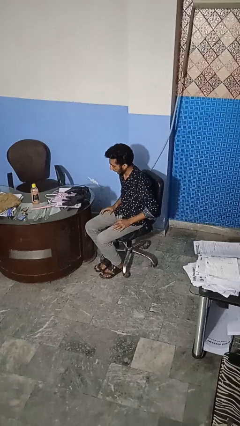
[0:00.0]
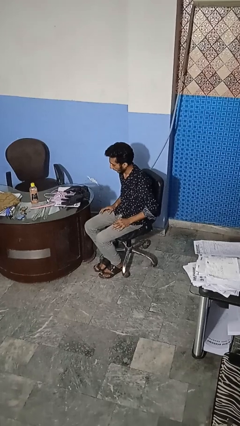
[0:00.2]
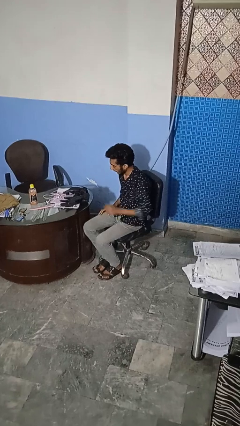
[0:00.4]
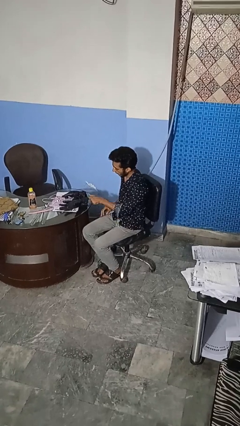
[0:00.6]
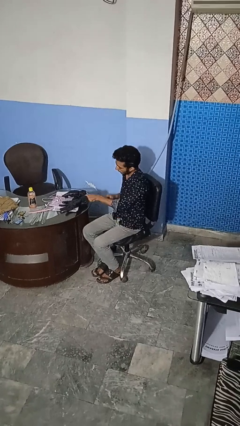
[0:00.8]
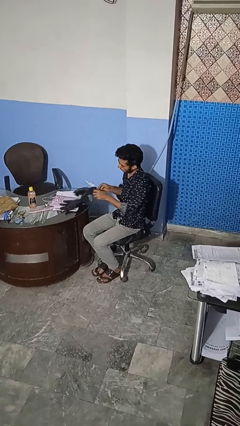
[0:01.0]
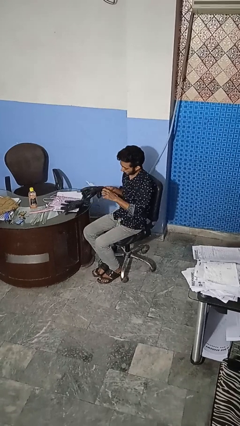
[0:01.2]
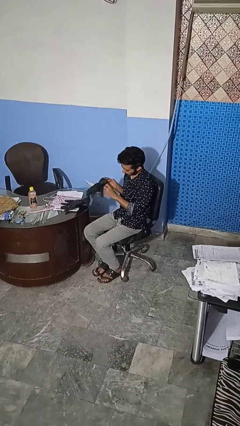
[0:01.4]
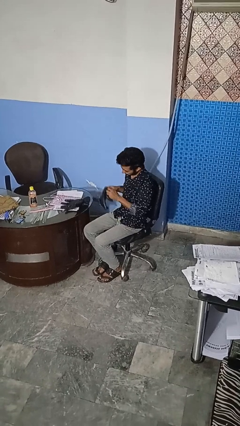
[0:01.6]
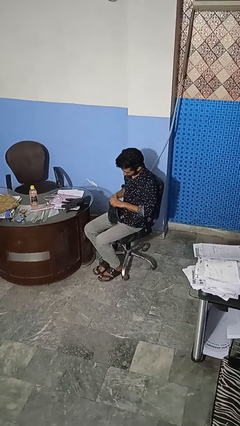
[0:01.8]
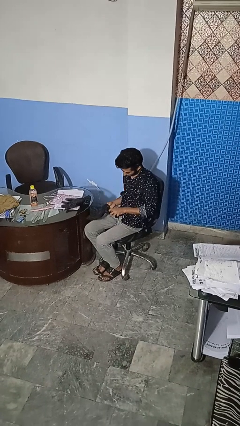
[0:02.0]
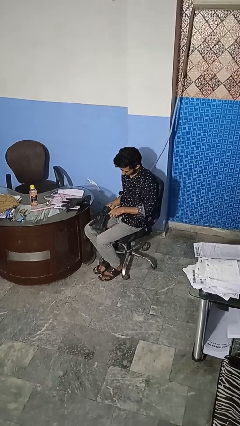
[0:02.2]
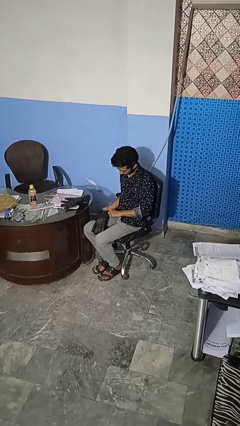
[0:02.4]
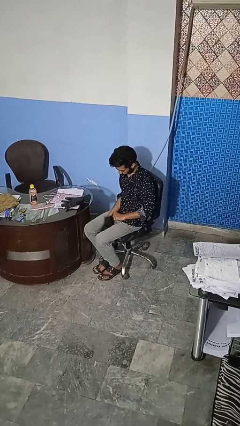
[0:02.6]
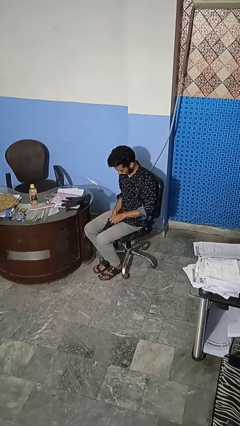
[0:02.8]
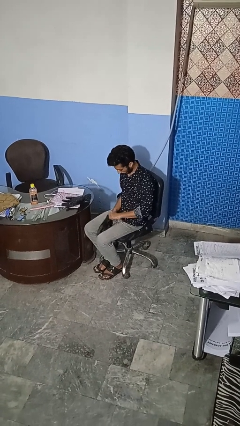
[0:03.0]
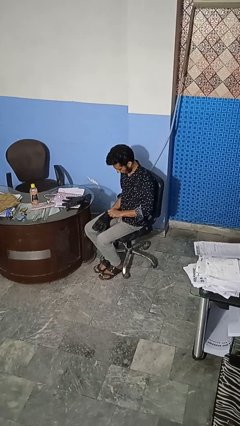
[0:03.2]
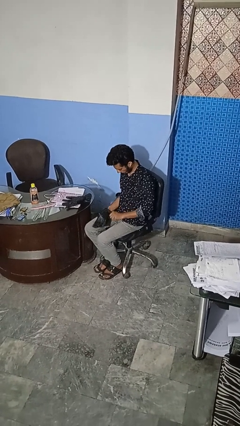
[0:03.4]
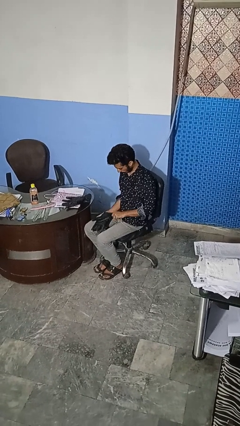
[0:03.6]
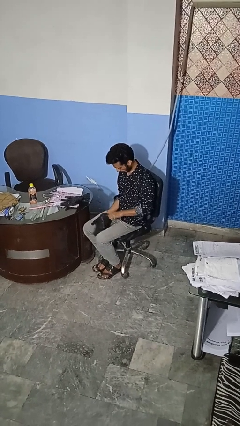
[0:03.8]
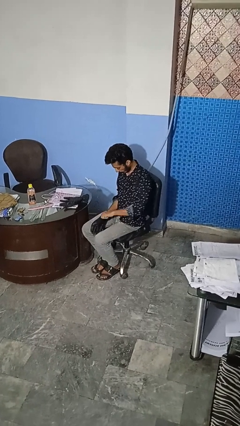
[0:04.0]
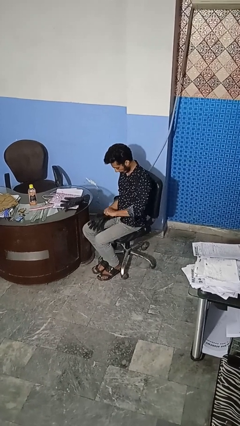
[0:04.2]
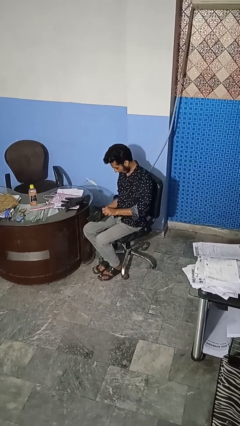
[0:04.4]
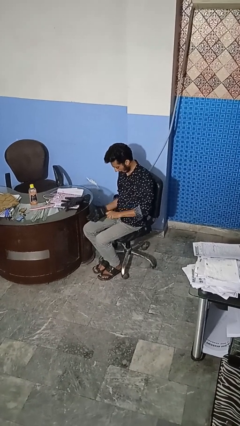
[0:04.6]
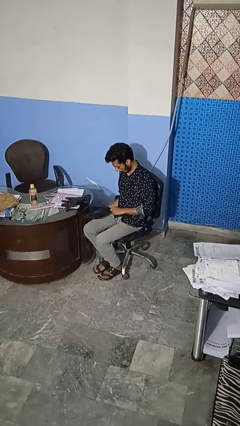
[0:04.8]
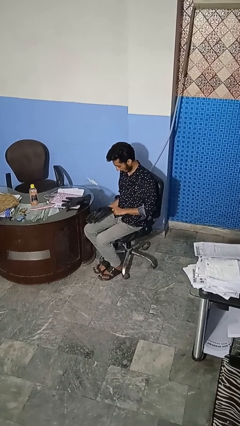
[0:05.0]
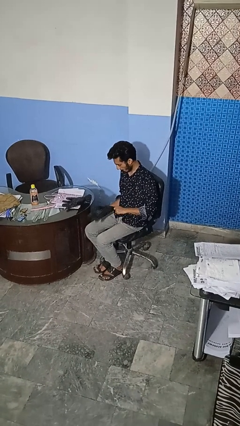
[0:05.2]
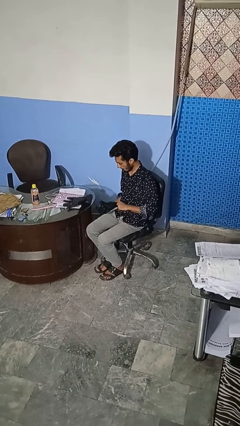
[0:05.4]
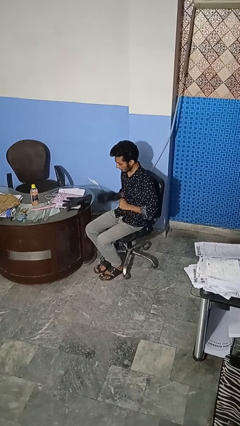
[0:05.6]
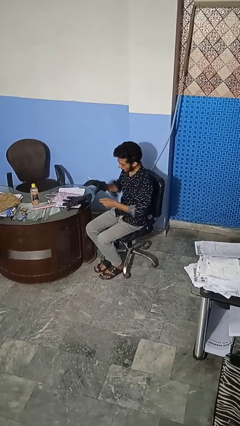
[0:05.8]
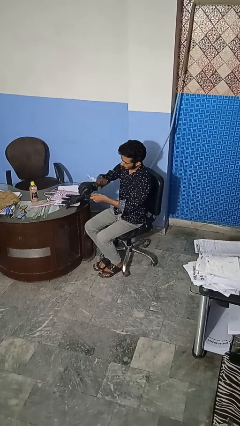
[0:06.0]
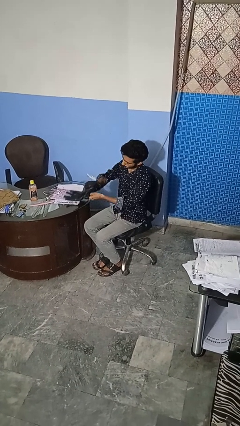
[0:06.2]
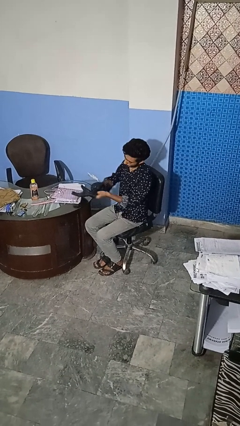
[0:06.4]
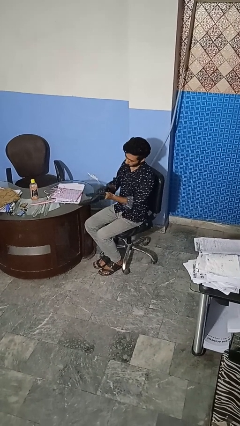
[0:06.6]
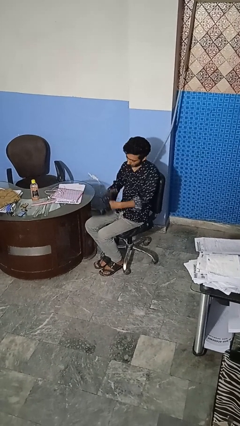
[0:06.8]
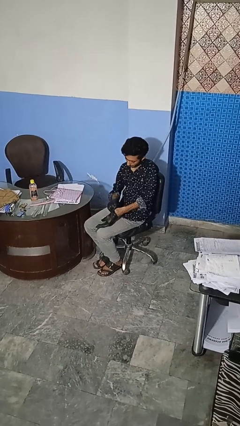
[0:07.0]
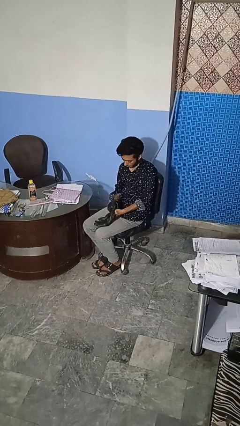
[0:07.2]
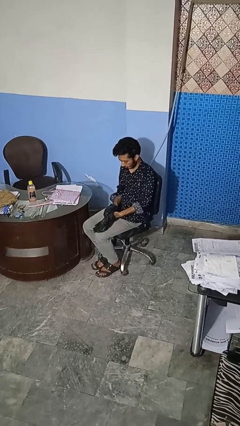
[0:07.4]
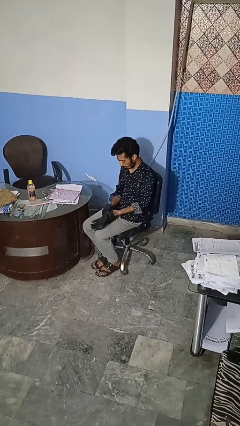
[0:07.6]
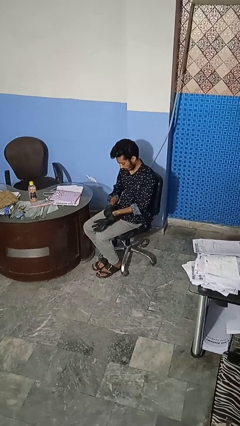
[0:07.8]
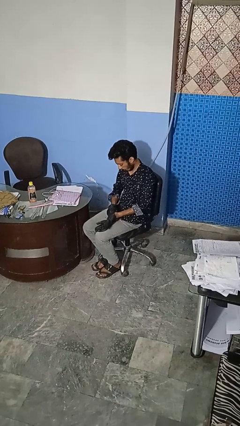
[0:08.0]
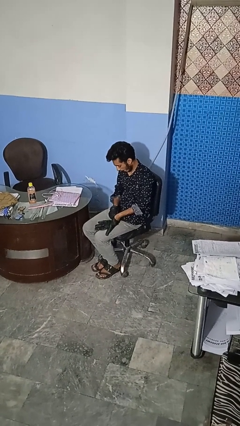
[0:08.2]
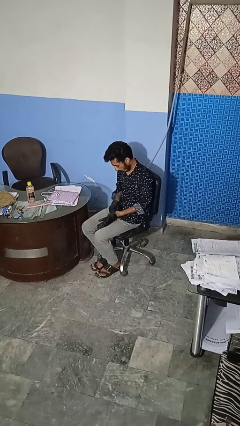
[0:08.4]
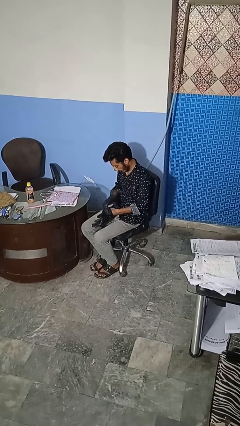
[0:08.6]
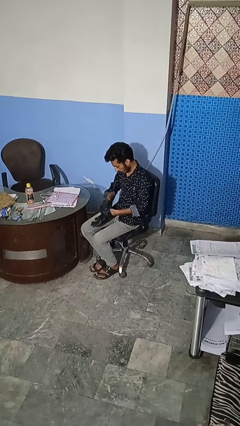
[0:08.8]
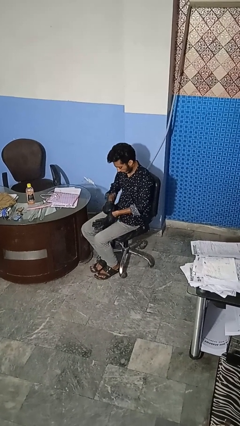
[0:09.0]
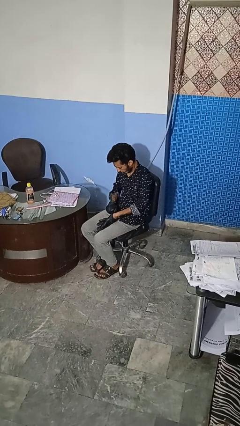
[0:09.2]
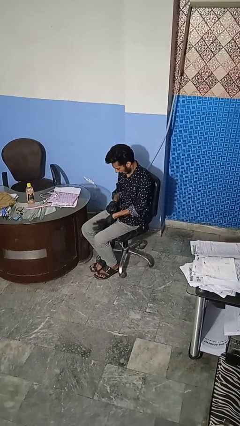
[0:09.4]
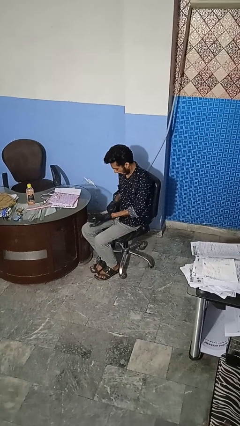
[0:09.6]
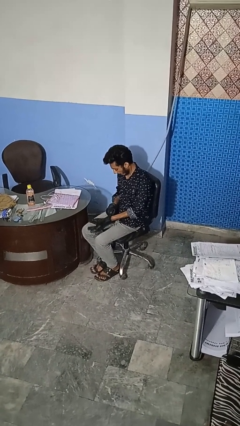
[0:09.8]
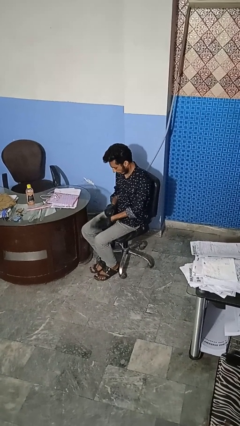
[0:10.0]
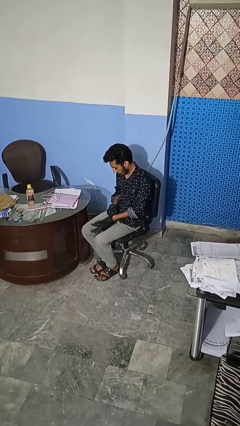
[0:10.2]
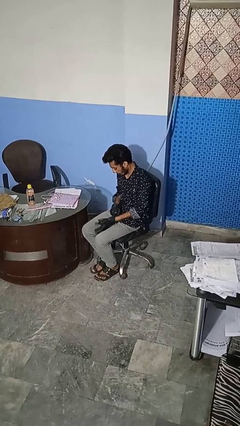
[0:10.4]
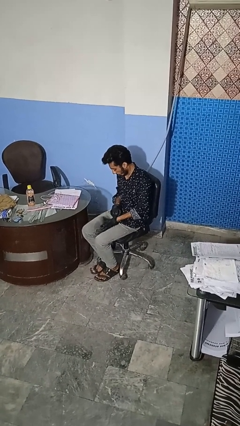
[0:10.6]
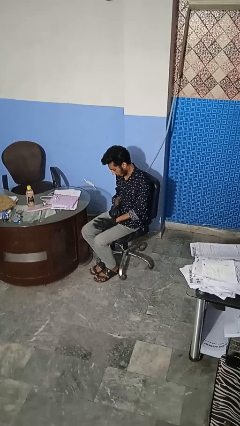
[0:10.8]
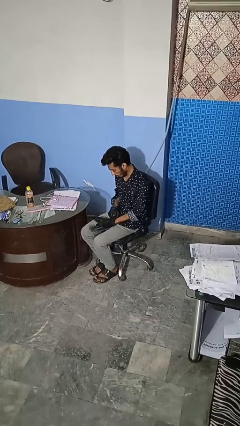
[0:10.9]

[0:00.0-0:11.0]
person puts on gloves

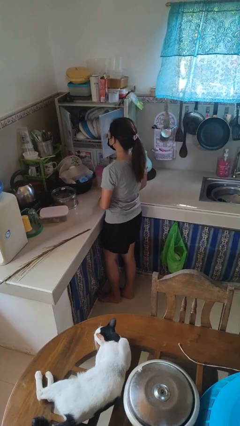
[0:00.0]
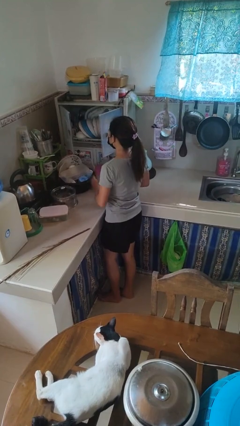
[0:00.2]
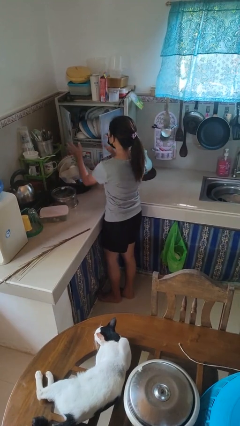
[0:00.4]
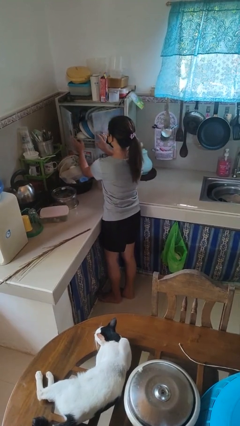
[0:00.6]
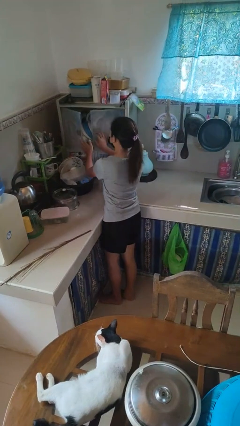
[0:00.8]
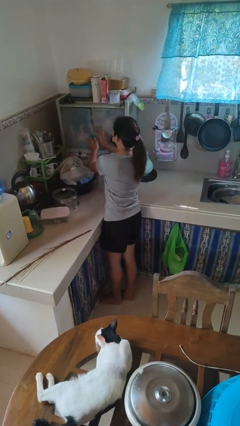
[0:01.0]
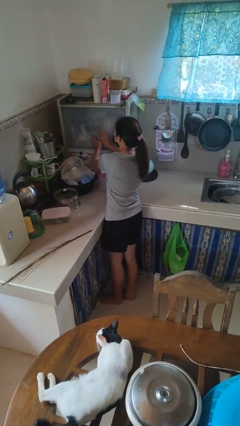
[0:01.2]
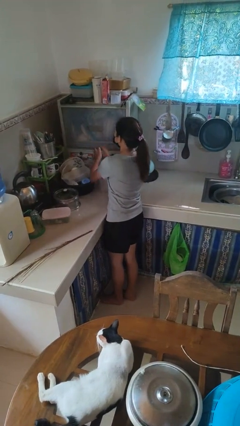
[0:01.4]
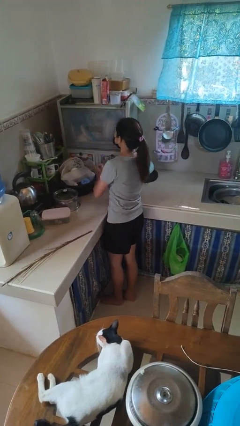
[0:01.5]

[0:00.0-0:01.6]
person closes kitchen drawer

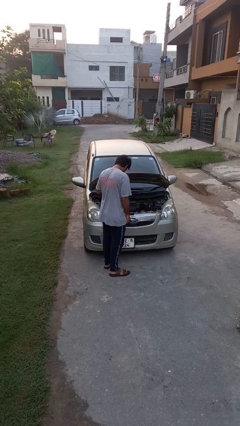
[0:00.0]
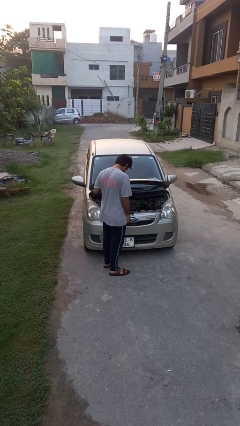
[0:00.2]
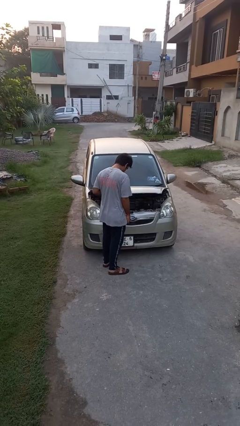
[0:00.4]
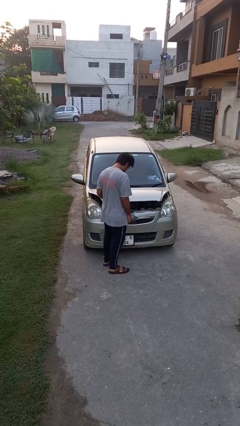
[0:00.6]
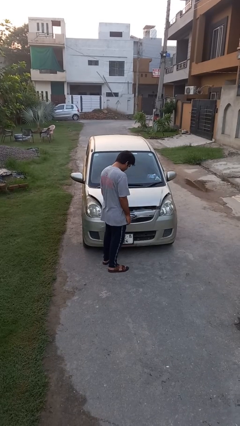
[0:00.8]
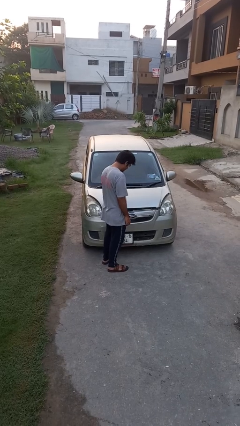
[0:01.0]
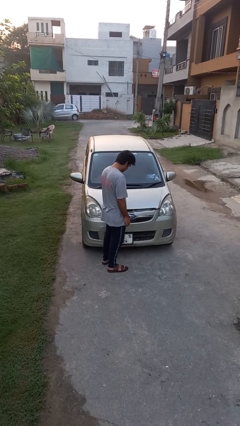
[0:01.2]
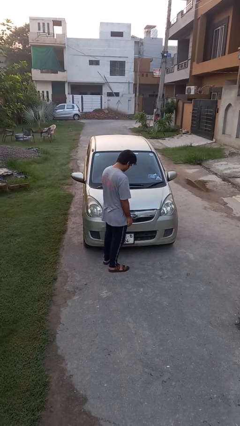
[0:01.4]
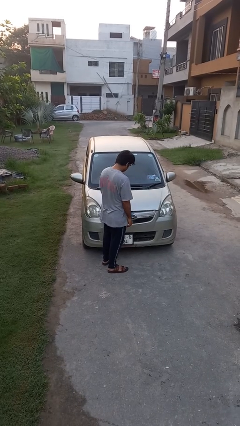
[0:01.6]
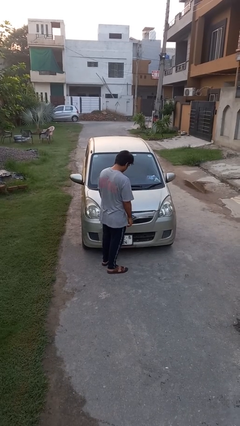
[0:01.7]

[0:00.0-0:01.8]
person closes car hood

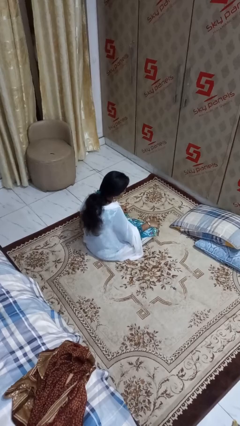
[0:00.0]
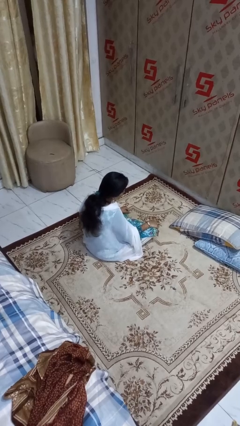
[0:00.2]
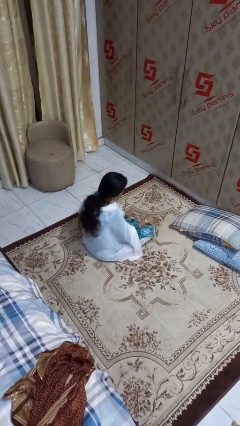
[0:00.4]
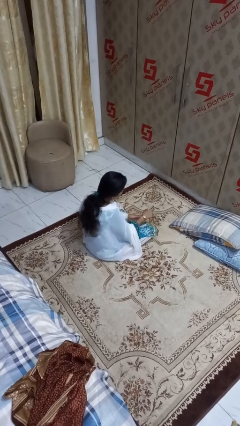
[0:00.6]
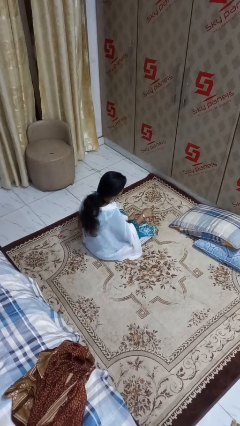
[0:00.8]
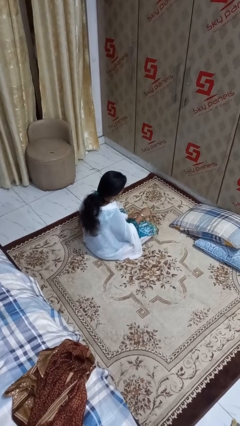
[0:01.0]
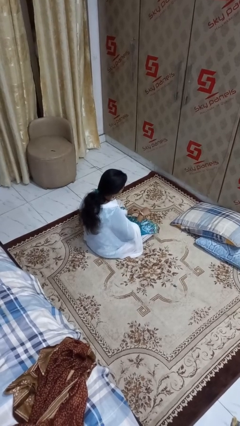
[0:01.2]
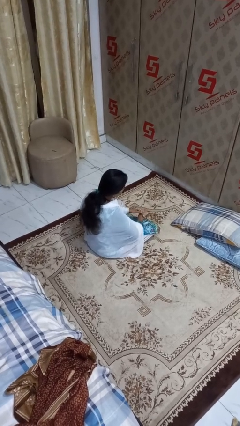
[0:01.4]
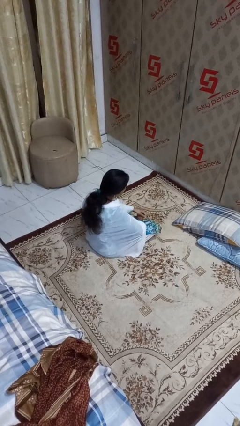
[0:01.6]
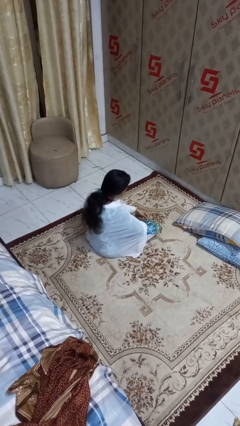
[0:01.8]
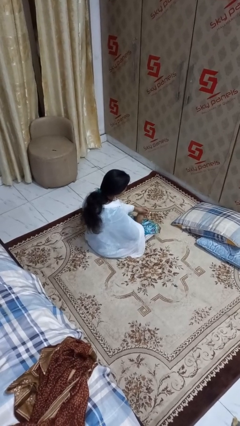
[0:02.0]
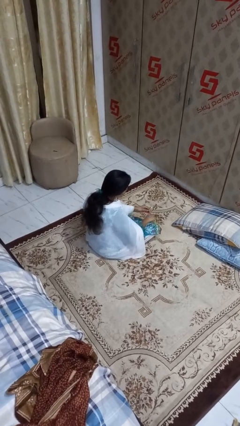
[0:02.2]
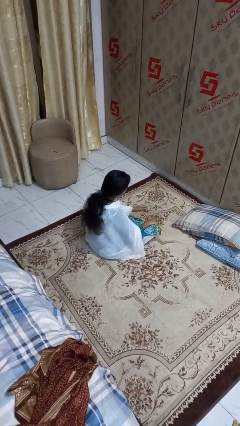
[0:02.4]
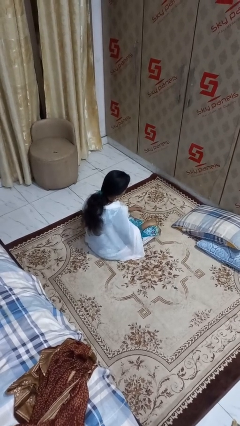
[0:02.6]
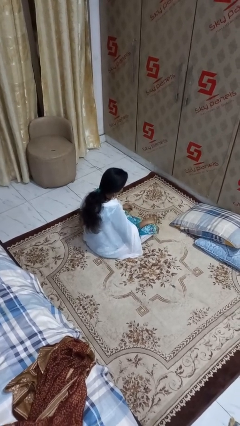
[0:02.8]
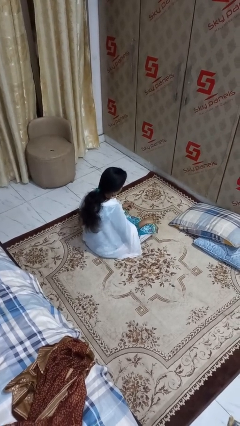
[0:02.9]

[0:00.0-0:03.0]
person takes off wristwatch

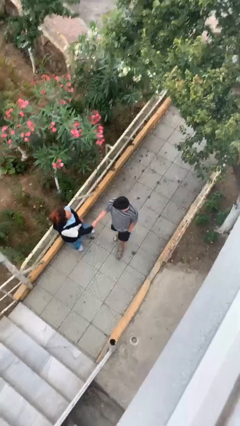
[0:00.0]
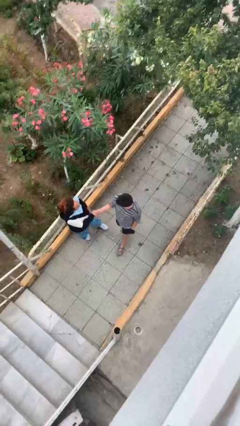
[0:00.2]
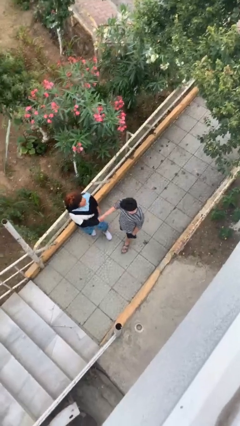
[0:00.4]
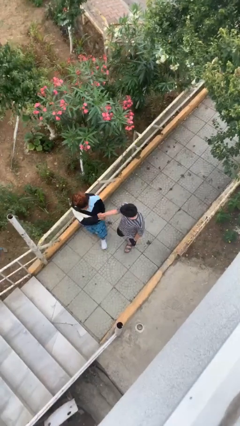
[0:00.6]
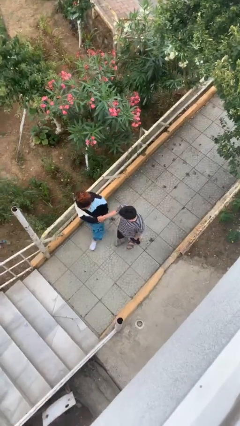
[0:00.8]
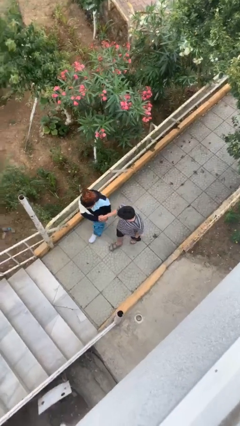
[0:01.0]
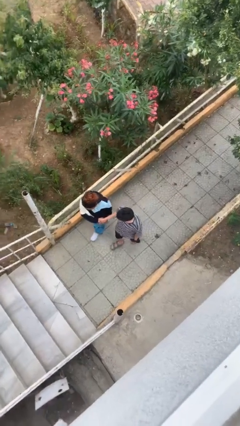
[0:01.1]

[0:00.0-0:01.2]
person shakes hand
